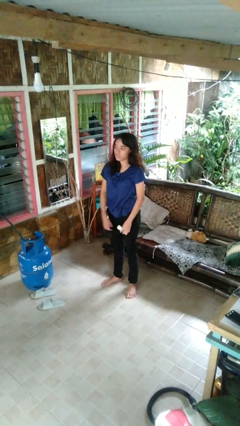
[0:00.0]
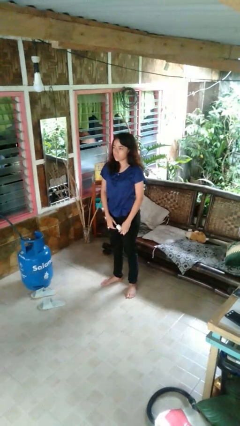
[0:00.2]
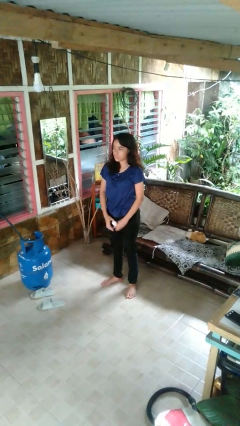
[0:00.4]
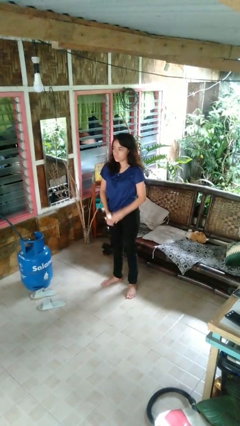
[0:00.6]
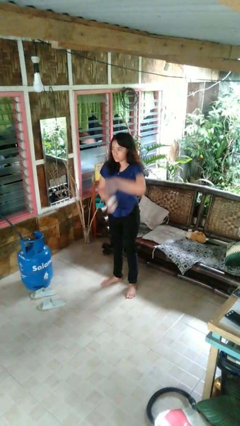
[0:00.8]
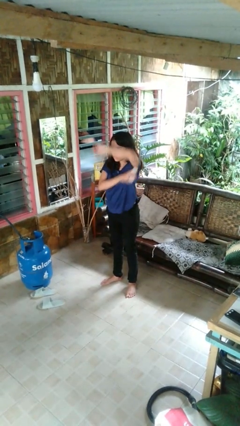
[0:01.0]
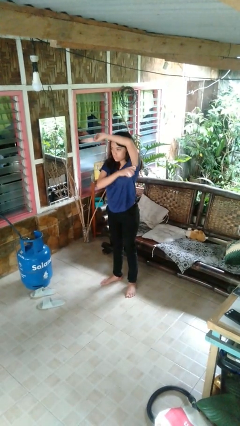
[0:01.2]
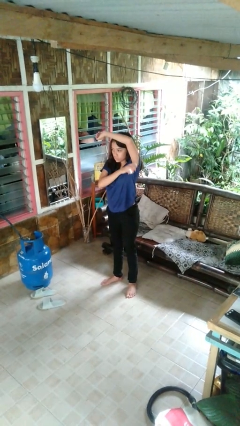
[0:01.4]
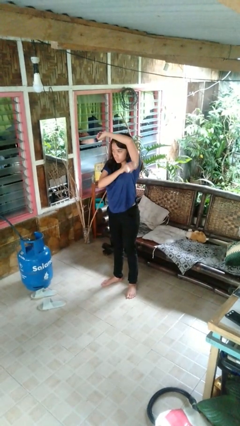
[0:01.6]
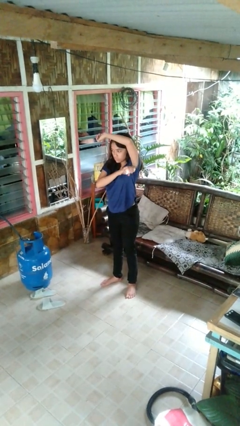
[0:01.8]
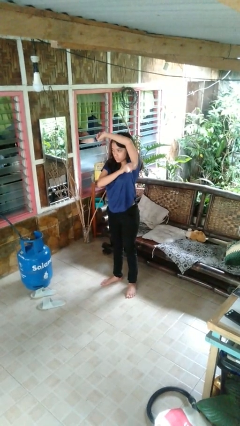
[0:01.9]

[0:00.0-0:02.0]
person applies deodorant

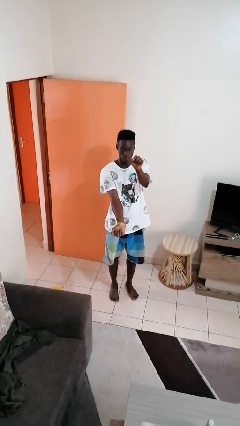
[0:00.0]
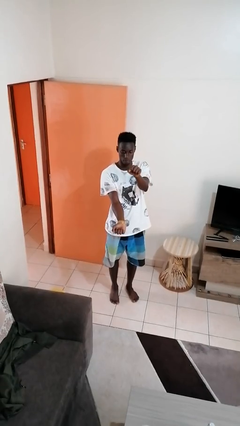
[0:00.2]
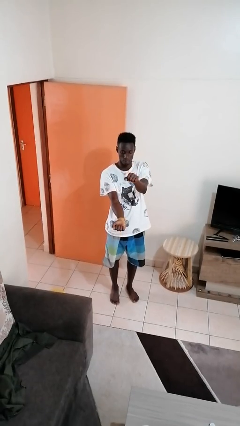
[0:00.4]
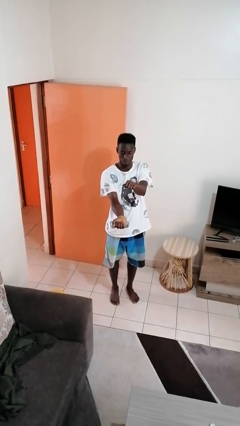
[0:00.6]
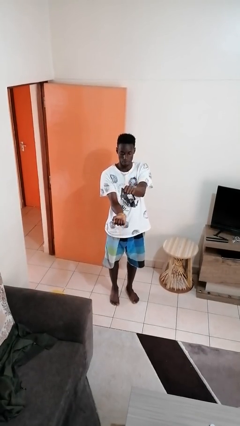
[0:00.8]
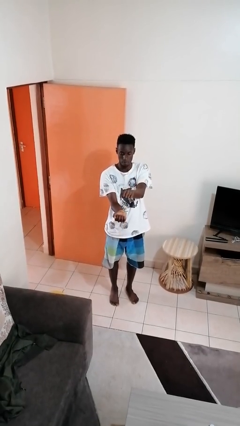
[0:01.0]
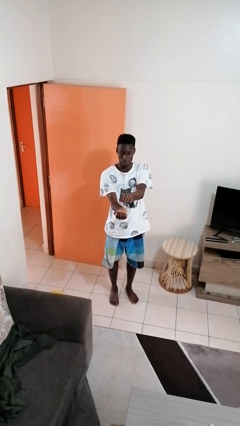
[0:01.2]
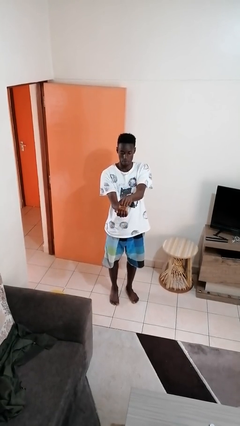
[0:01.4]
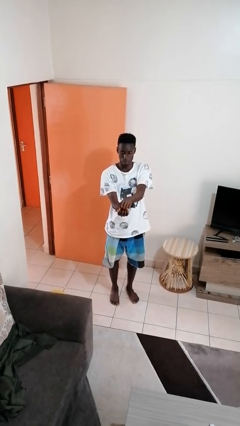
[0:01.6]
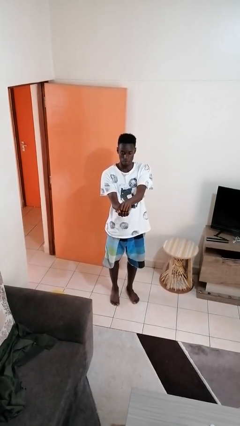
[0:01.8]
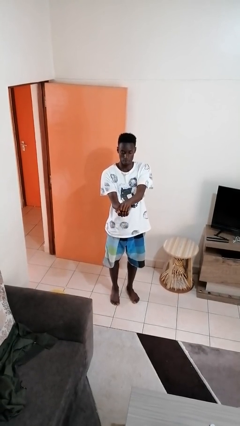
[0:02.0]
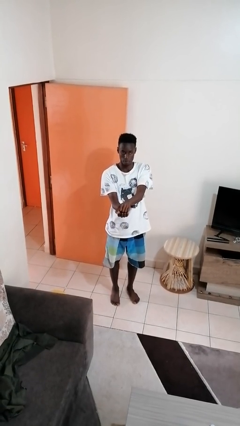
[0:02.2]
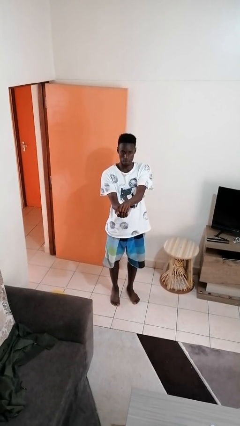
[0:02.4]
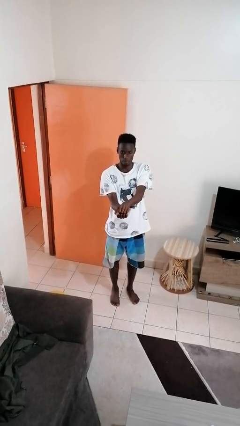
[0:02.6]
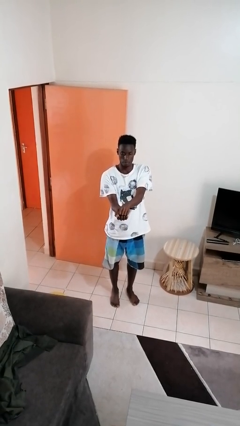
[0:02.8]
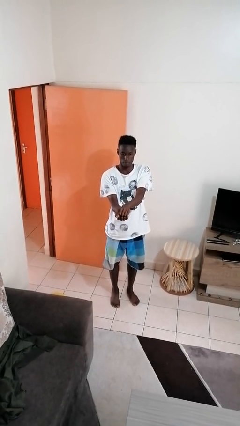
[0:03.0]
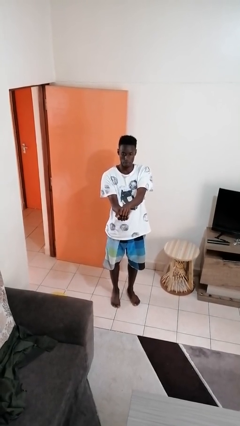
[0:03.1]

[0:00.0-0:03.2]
person gestures zoom out

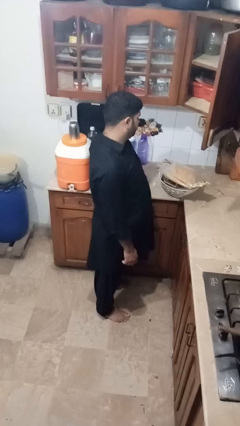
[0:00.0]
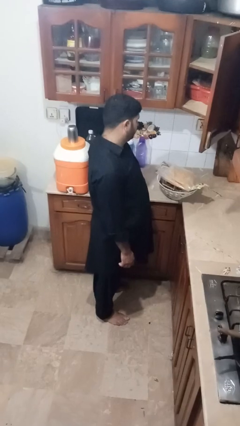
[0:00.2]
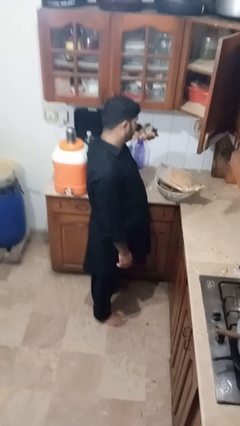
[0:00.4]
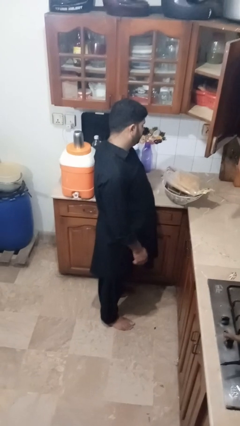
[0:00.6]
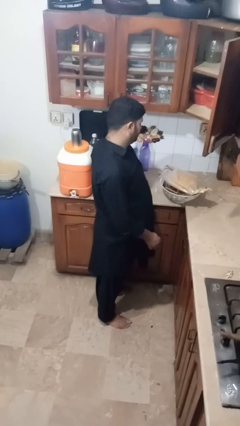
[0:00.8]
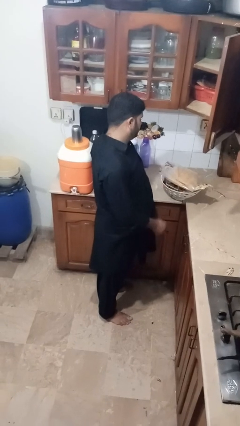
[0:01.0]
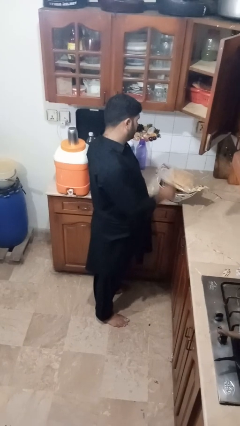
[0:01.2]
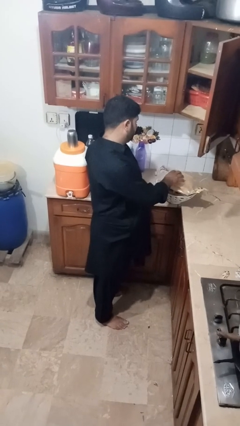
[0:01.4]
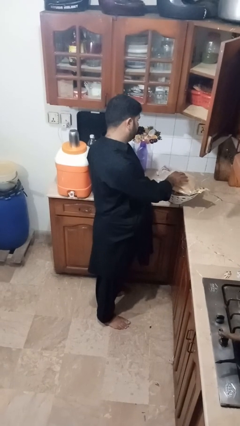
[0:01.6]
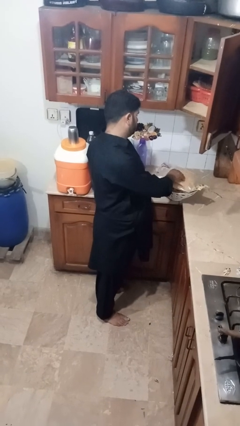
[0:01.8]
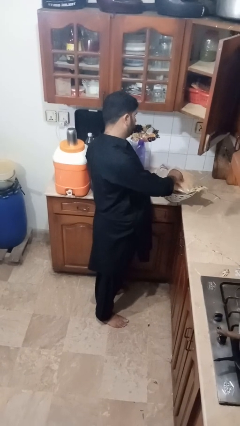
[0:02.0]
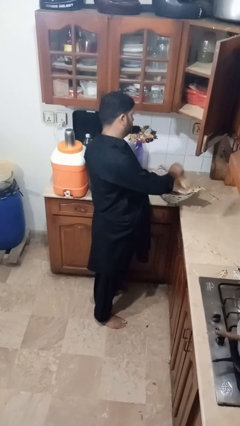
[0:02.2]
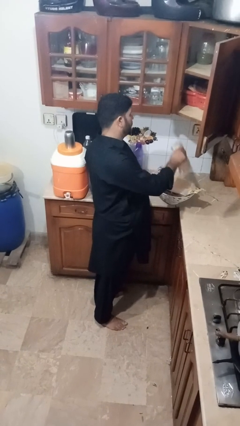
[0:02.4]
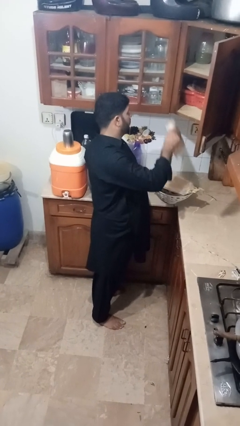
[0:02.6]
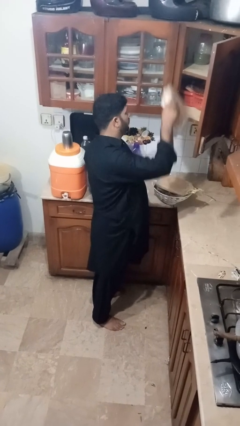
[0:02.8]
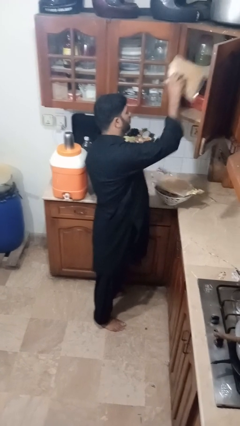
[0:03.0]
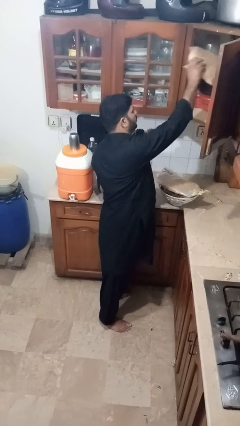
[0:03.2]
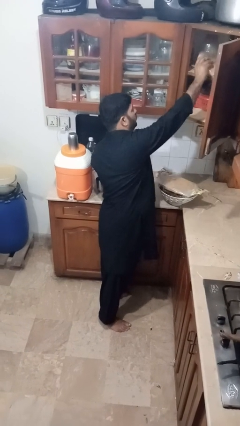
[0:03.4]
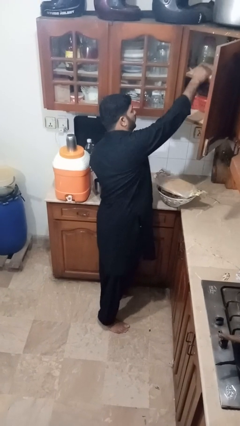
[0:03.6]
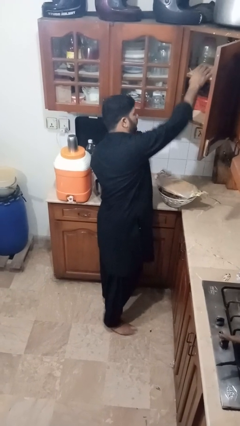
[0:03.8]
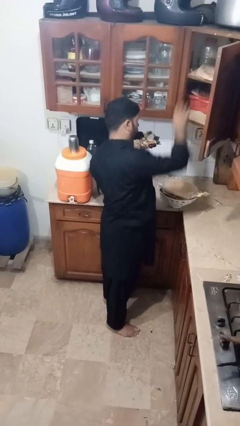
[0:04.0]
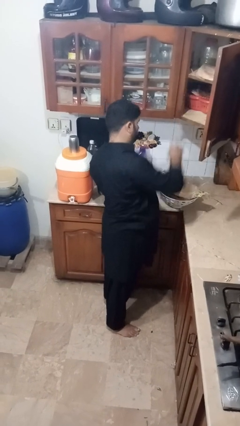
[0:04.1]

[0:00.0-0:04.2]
person loads groceries into cabinet

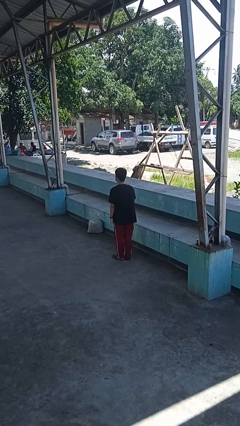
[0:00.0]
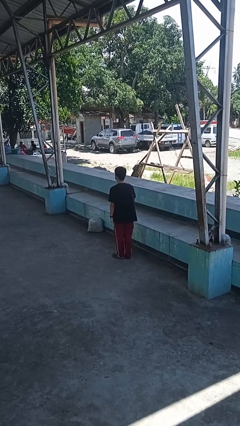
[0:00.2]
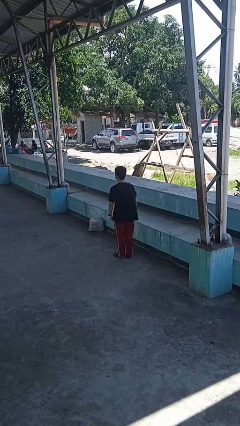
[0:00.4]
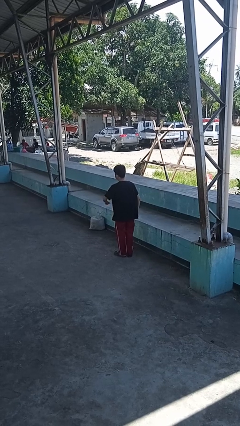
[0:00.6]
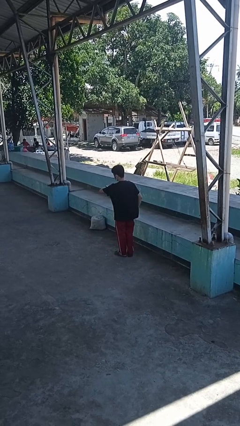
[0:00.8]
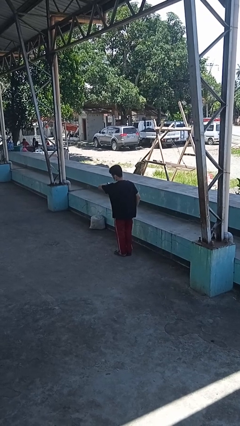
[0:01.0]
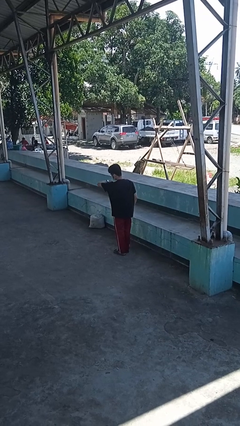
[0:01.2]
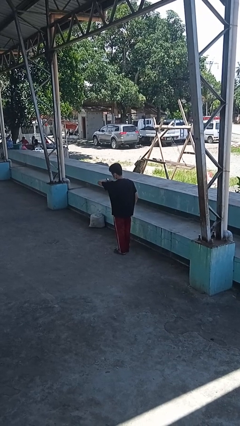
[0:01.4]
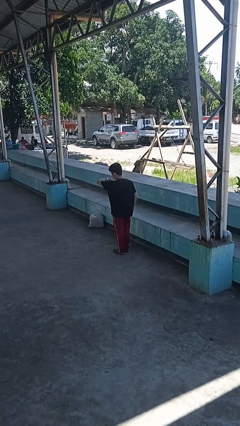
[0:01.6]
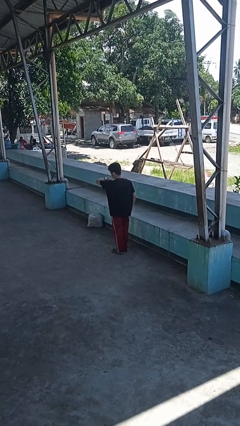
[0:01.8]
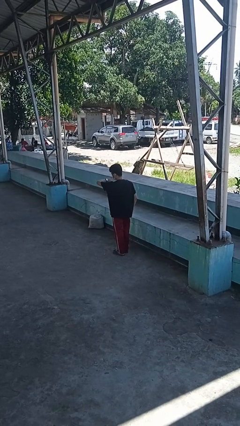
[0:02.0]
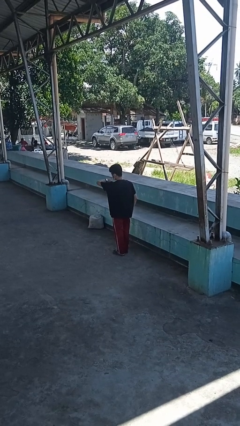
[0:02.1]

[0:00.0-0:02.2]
person looks at wristwatch

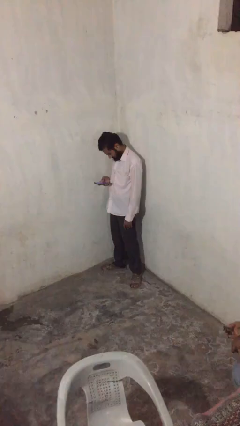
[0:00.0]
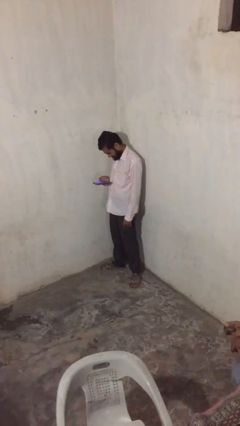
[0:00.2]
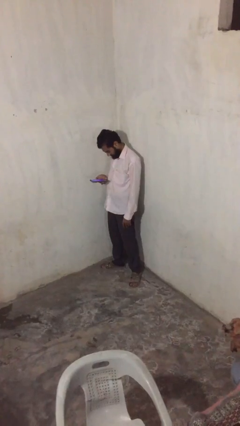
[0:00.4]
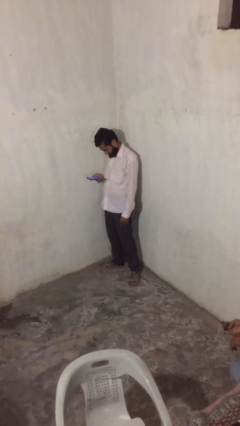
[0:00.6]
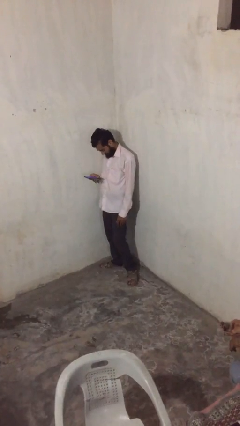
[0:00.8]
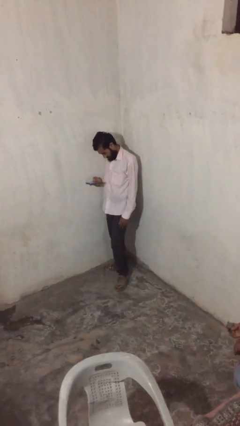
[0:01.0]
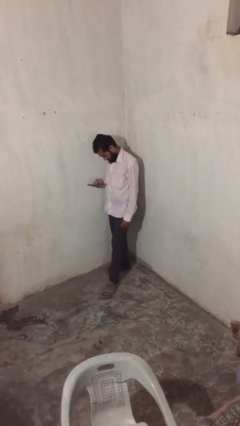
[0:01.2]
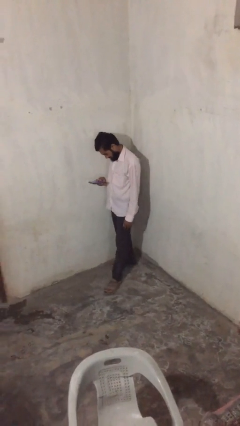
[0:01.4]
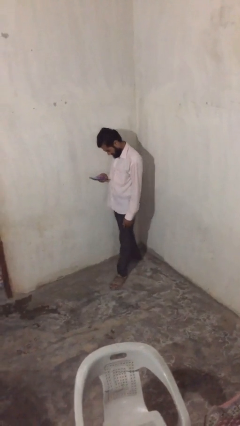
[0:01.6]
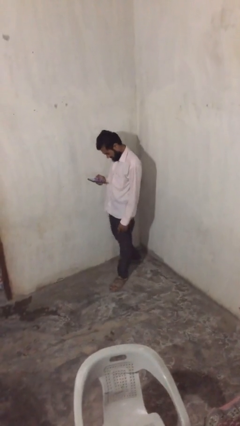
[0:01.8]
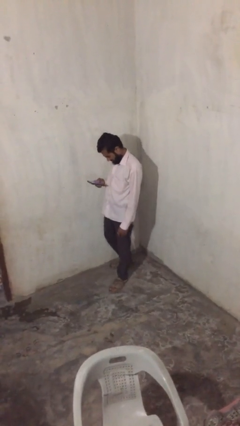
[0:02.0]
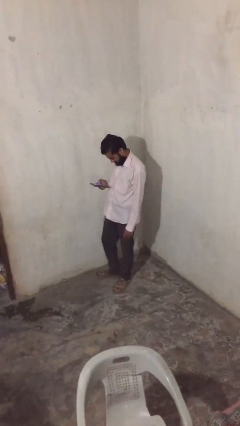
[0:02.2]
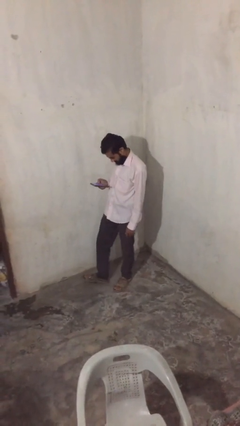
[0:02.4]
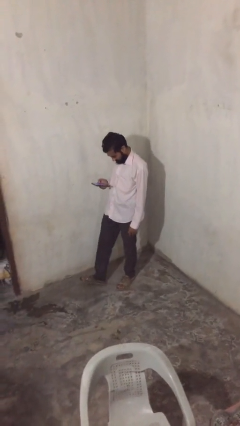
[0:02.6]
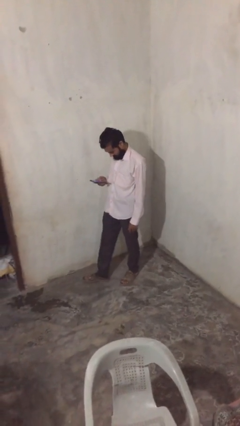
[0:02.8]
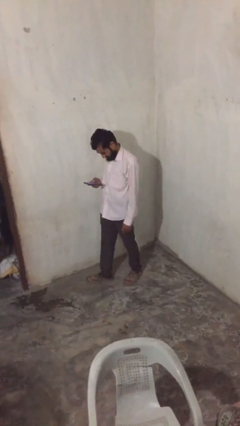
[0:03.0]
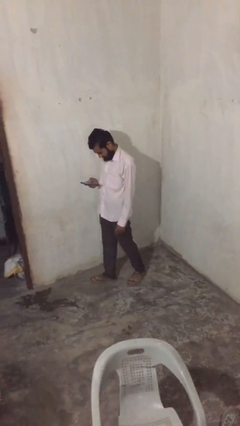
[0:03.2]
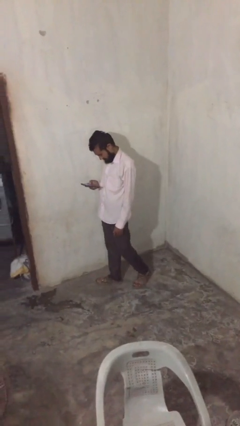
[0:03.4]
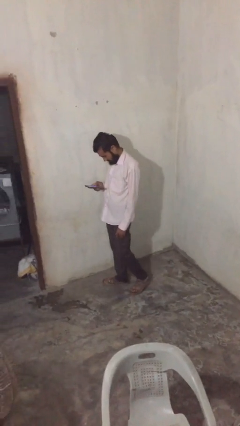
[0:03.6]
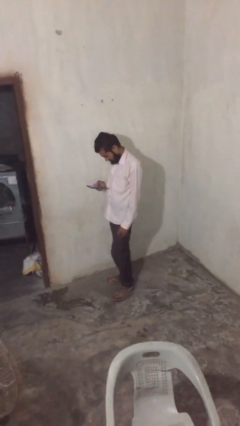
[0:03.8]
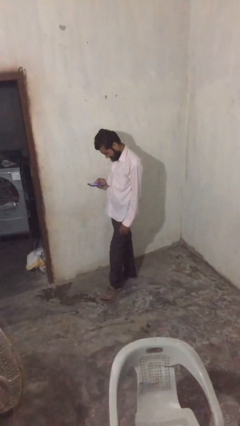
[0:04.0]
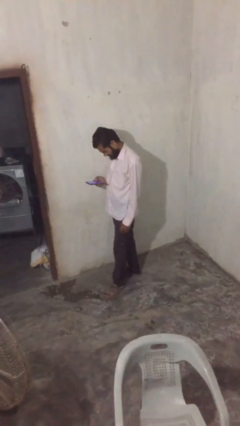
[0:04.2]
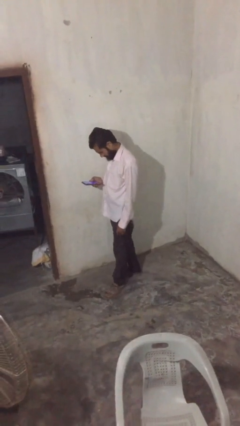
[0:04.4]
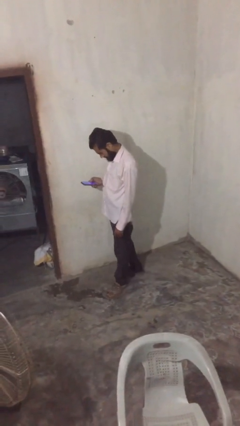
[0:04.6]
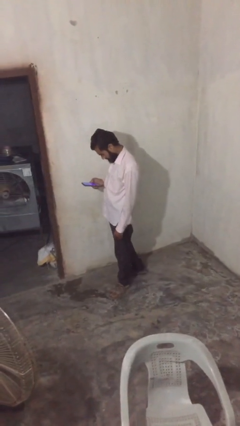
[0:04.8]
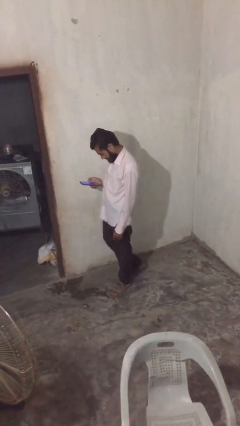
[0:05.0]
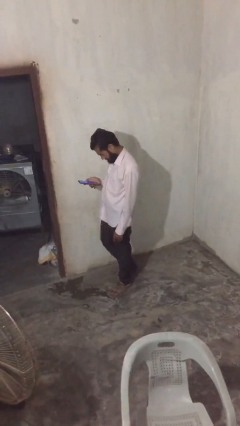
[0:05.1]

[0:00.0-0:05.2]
person texts on phone

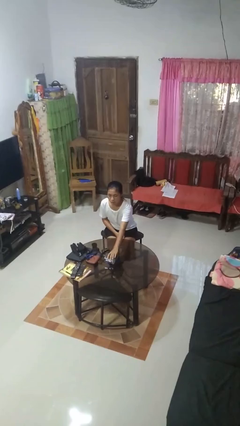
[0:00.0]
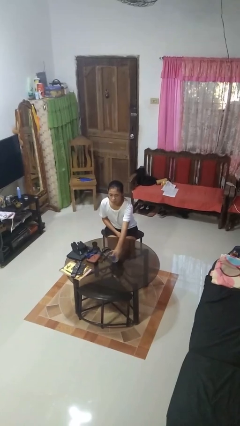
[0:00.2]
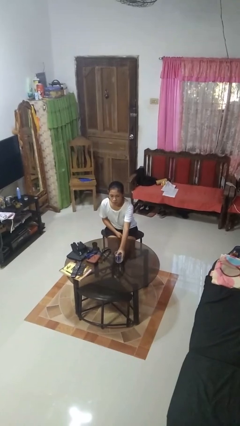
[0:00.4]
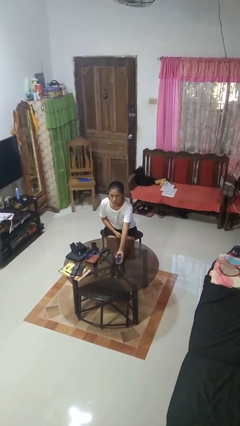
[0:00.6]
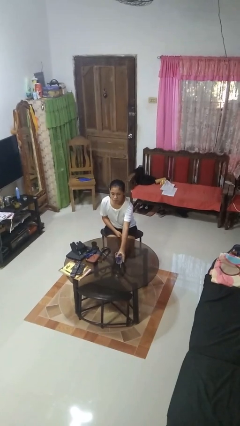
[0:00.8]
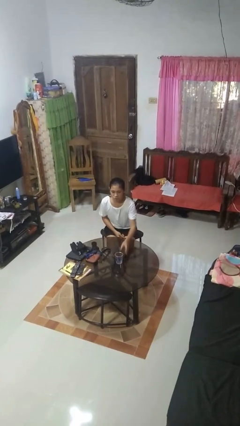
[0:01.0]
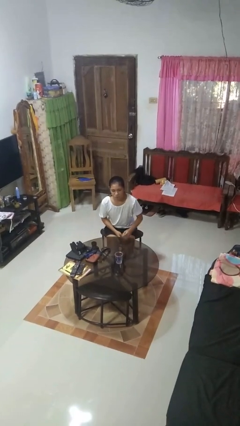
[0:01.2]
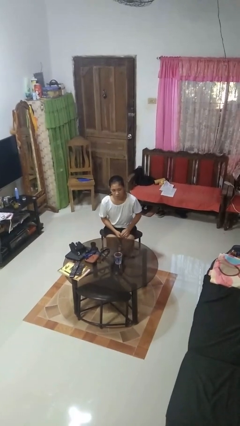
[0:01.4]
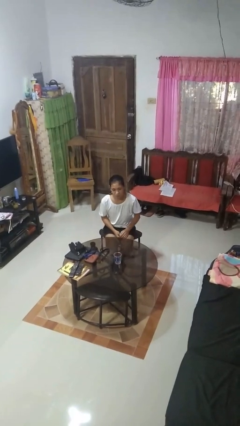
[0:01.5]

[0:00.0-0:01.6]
person sets upright glass
